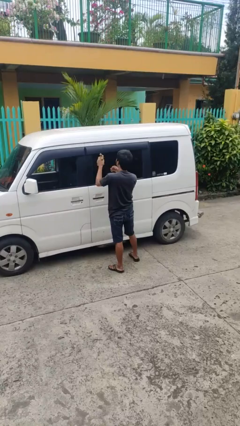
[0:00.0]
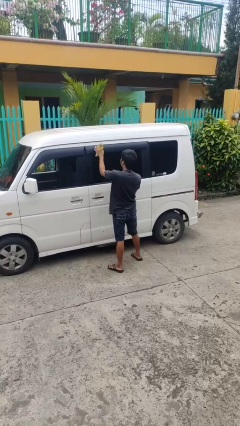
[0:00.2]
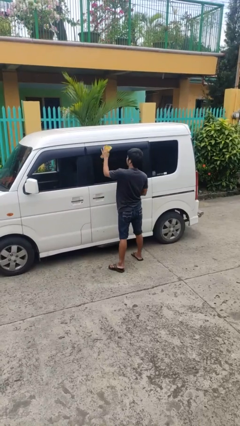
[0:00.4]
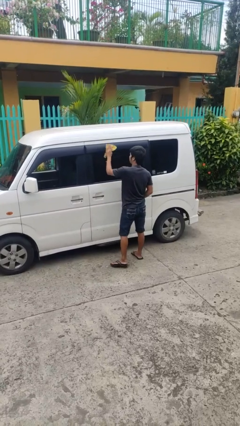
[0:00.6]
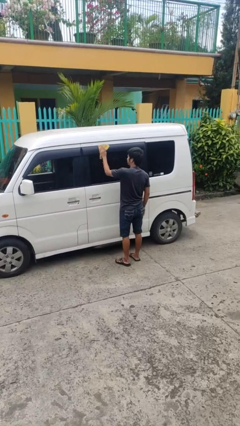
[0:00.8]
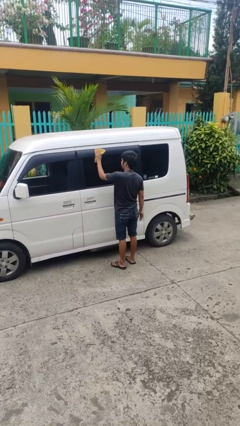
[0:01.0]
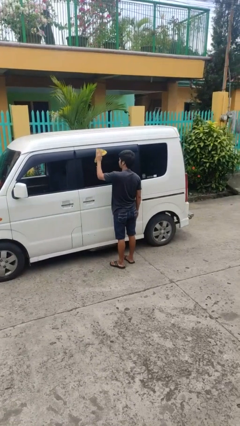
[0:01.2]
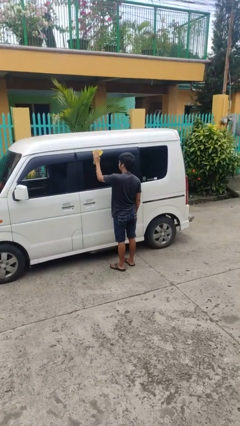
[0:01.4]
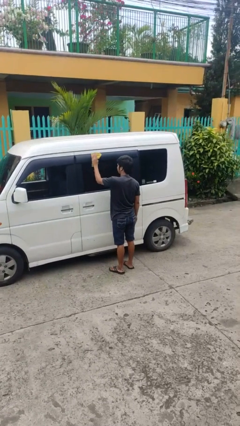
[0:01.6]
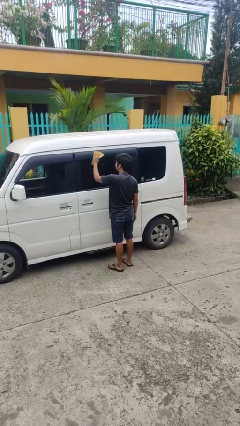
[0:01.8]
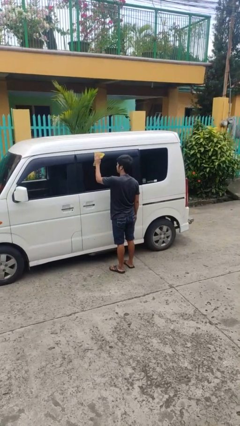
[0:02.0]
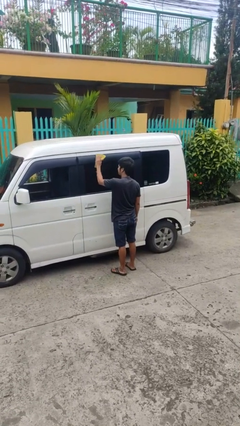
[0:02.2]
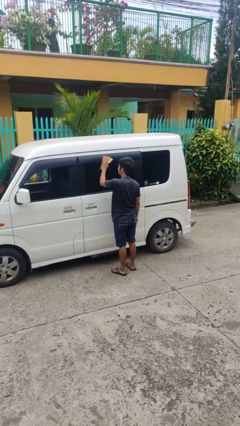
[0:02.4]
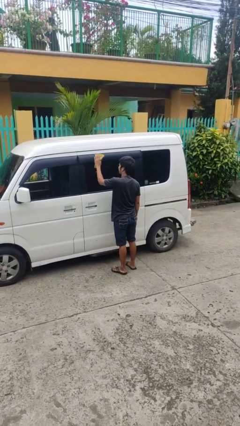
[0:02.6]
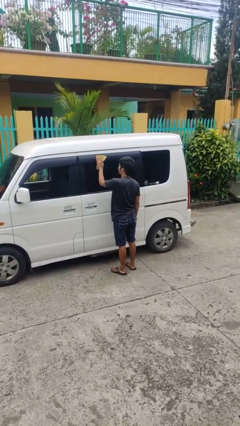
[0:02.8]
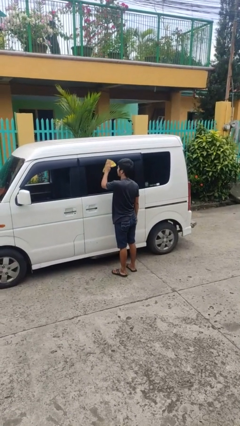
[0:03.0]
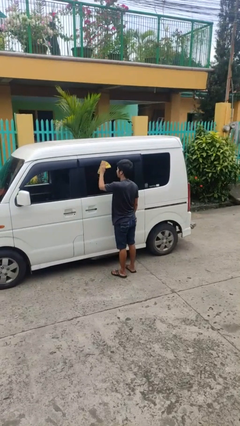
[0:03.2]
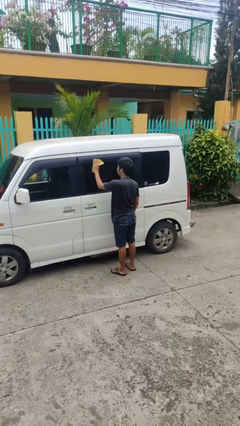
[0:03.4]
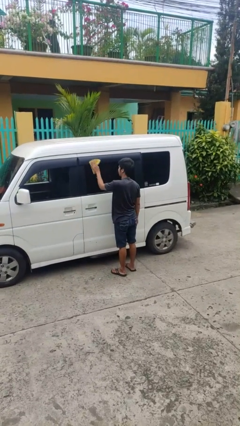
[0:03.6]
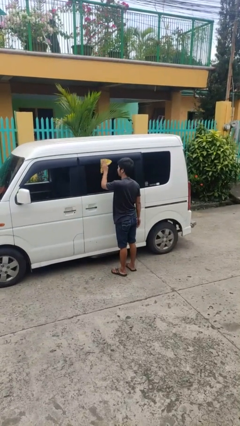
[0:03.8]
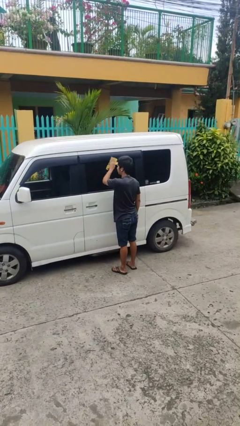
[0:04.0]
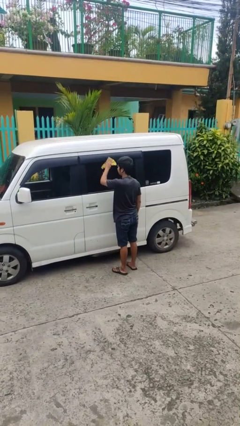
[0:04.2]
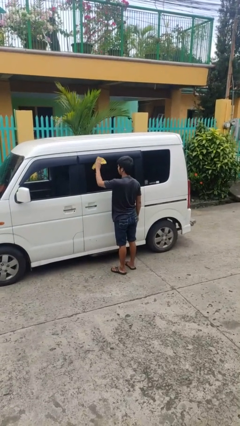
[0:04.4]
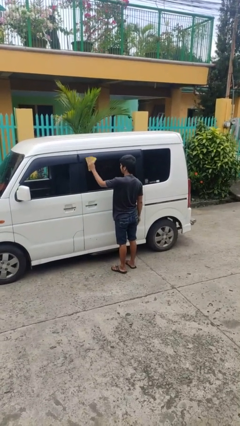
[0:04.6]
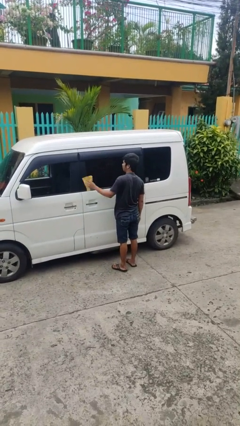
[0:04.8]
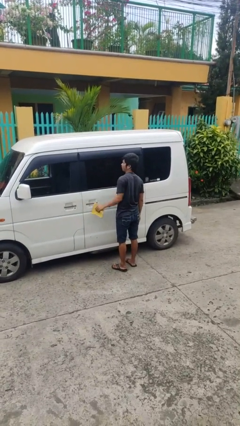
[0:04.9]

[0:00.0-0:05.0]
person polishes car with rag

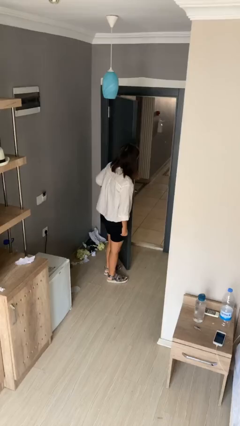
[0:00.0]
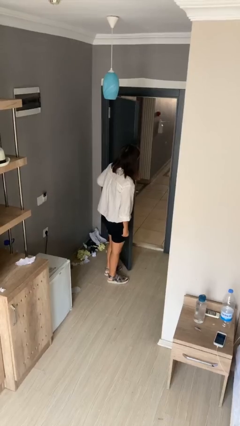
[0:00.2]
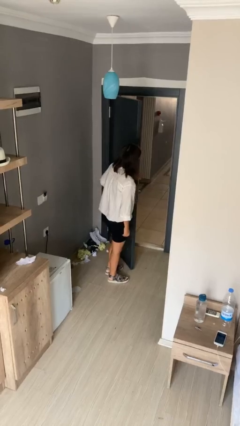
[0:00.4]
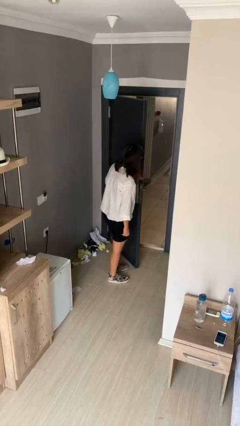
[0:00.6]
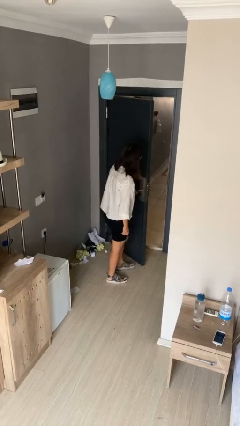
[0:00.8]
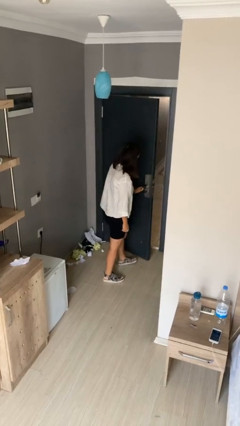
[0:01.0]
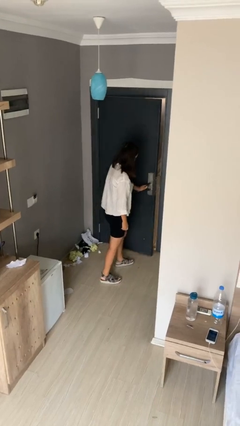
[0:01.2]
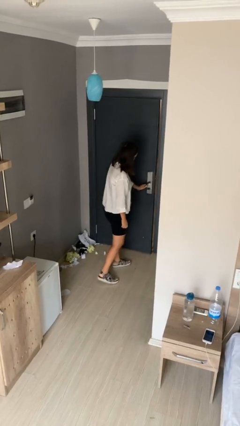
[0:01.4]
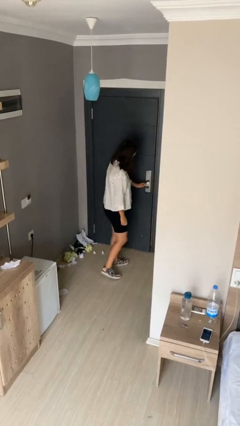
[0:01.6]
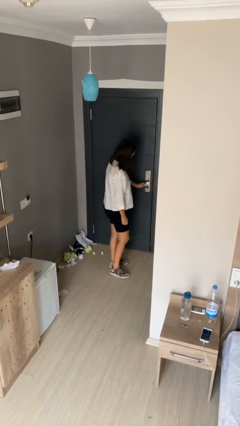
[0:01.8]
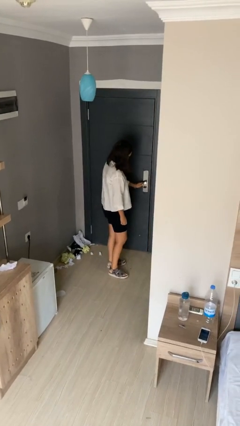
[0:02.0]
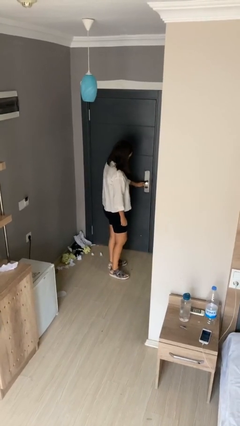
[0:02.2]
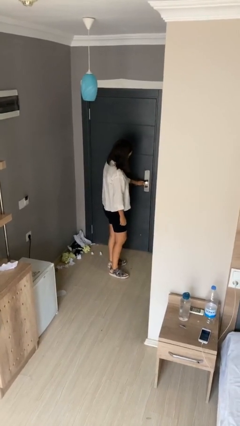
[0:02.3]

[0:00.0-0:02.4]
person closes facility door

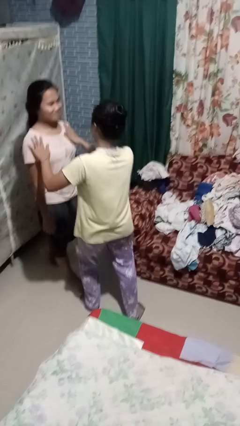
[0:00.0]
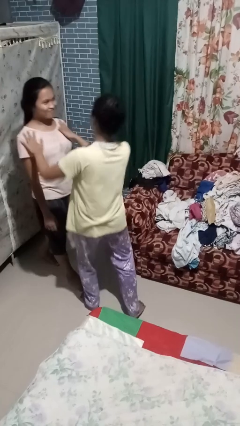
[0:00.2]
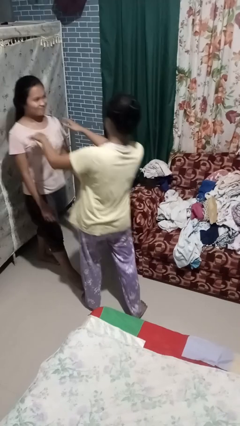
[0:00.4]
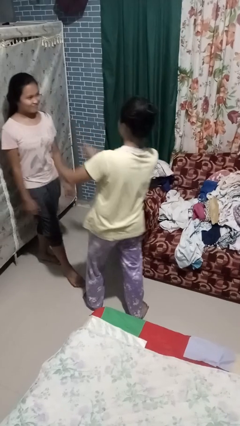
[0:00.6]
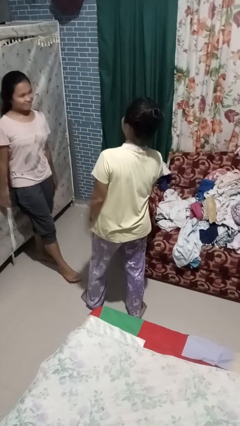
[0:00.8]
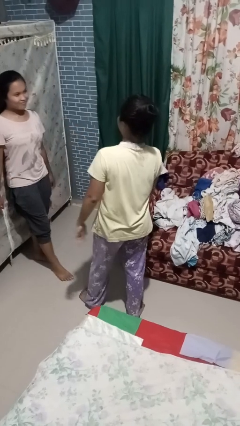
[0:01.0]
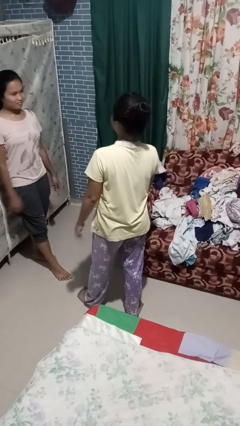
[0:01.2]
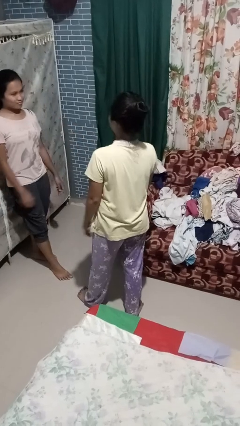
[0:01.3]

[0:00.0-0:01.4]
person shoves person

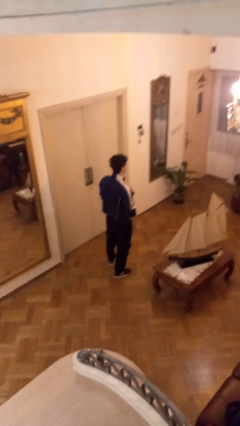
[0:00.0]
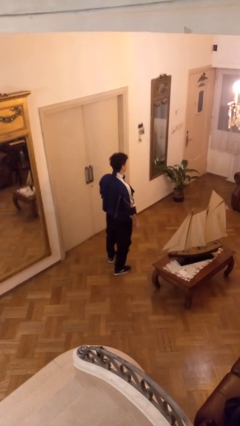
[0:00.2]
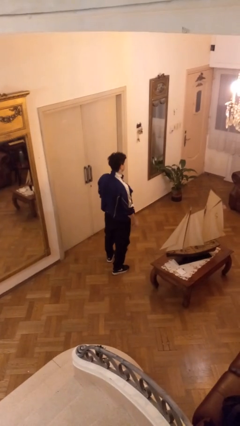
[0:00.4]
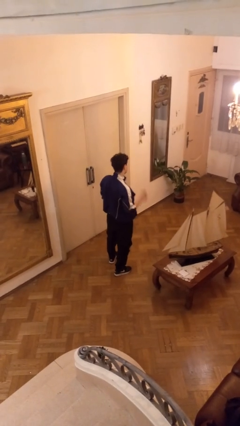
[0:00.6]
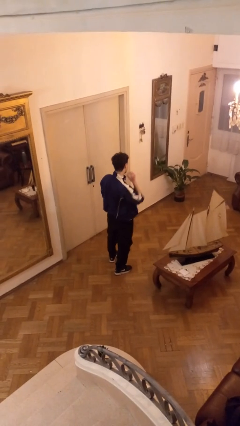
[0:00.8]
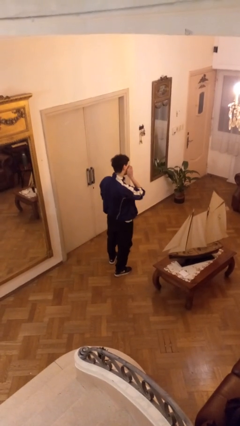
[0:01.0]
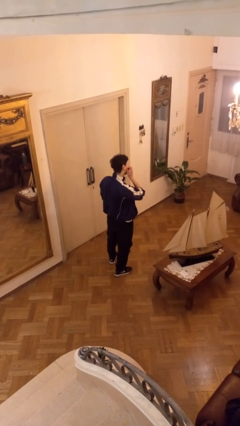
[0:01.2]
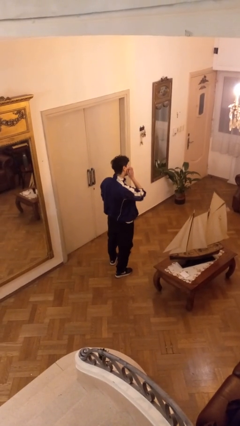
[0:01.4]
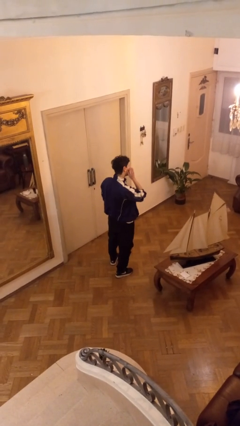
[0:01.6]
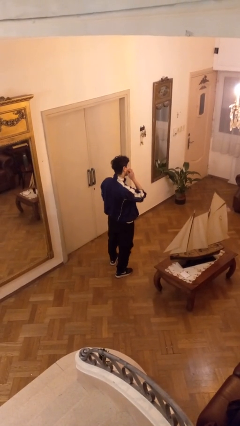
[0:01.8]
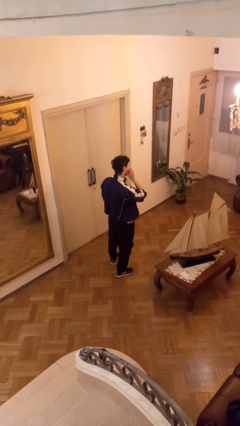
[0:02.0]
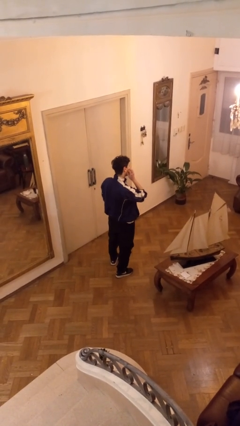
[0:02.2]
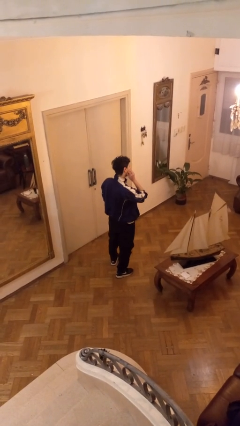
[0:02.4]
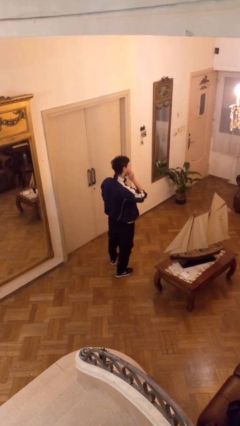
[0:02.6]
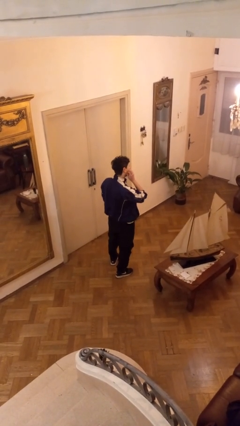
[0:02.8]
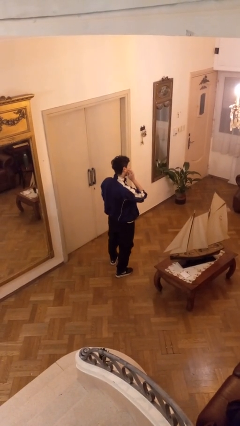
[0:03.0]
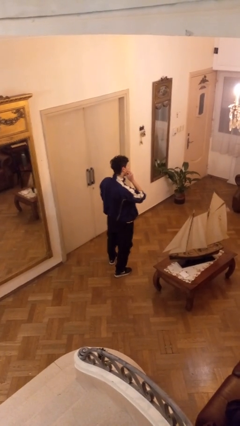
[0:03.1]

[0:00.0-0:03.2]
person scratches face

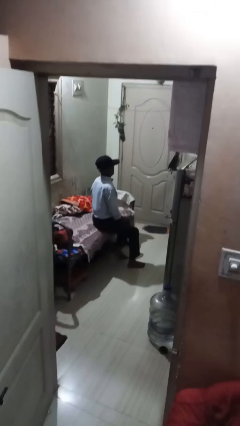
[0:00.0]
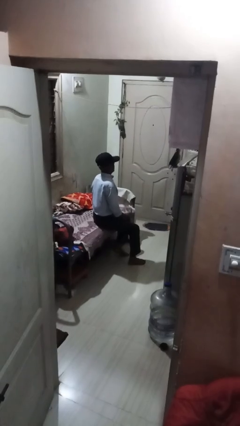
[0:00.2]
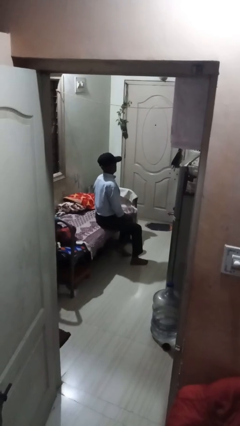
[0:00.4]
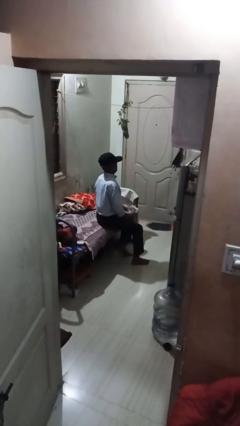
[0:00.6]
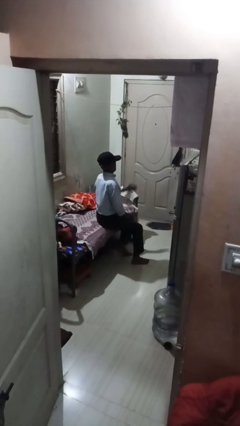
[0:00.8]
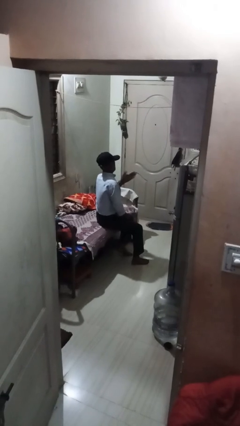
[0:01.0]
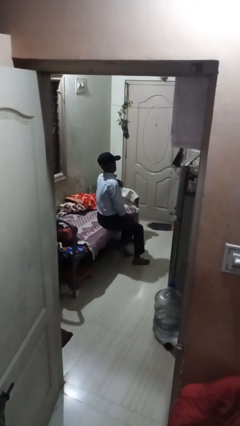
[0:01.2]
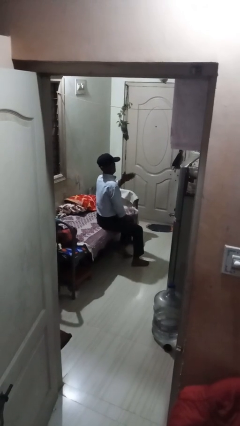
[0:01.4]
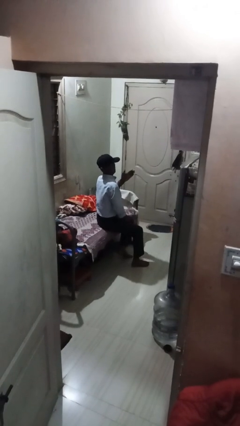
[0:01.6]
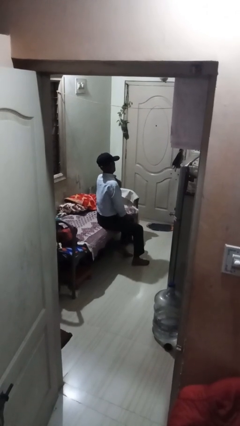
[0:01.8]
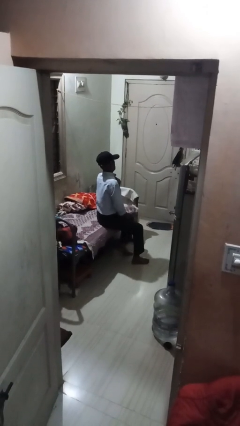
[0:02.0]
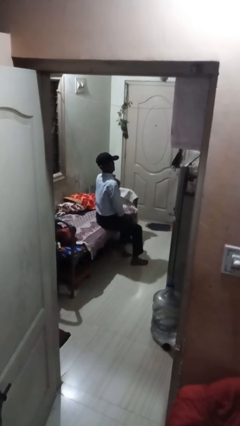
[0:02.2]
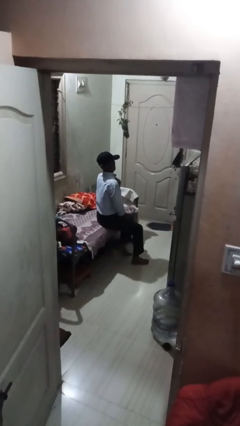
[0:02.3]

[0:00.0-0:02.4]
person drums on chest

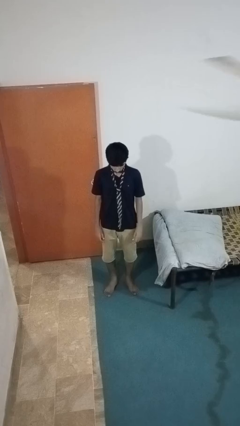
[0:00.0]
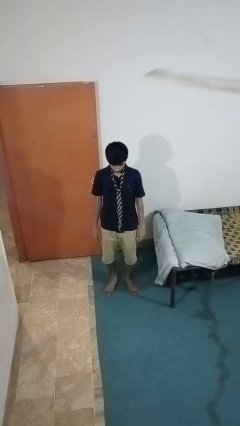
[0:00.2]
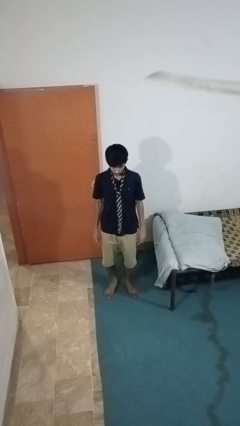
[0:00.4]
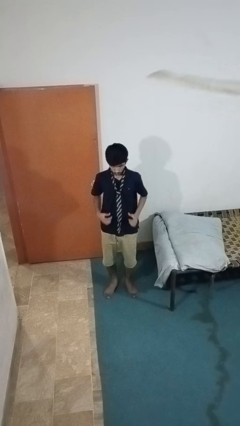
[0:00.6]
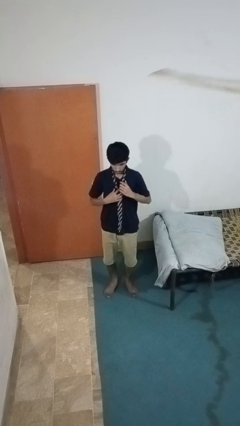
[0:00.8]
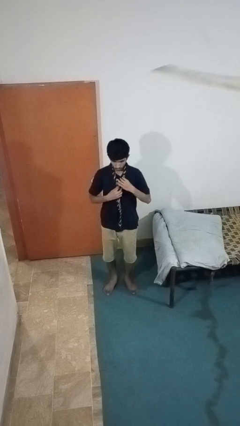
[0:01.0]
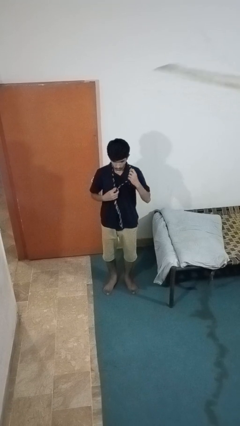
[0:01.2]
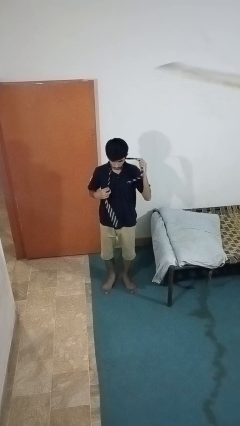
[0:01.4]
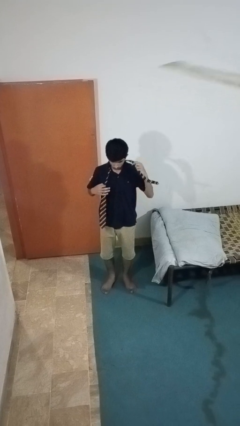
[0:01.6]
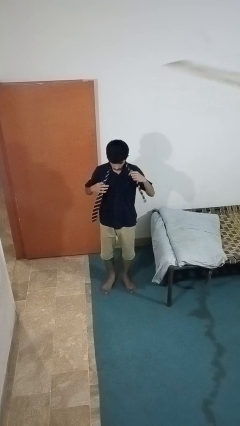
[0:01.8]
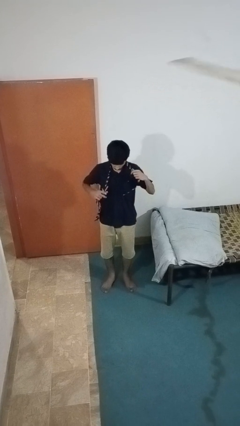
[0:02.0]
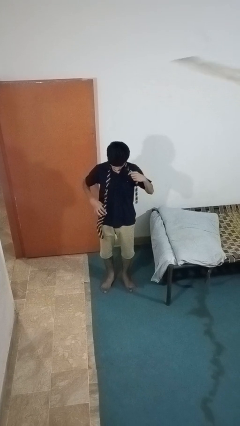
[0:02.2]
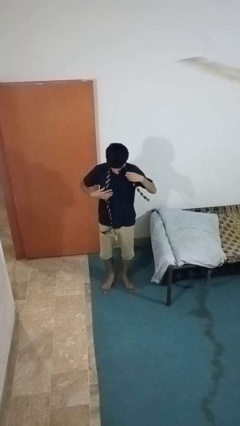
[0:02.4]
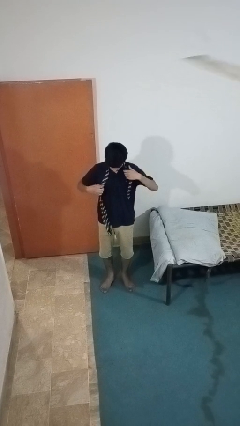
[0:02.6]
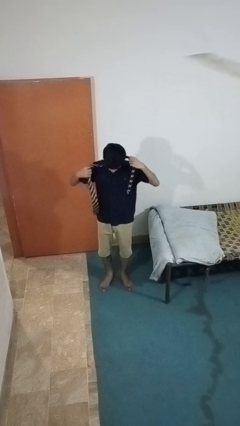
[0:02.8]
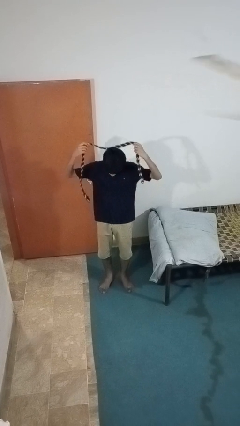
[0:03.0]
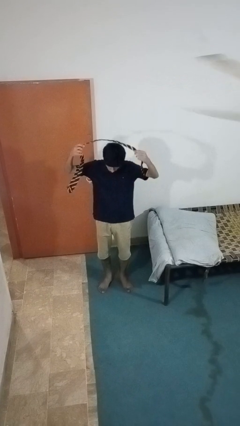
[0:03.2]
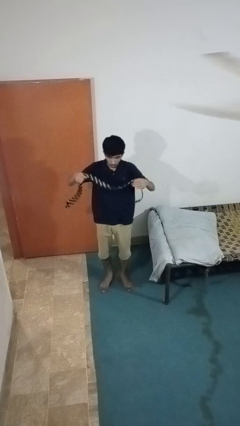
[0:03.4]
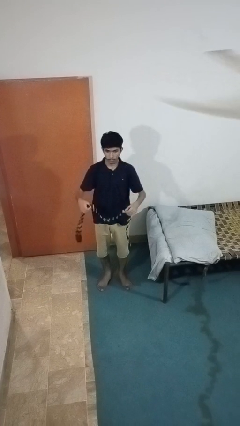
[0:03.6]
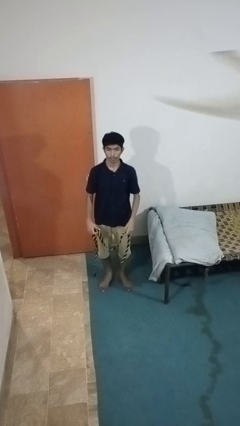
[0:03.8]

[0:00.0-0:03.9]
person takes off necktie
